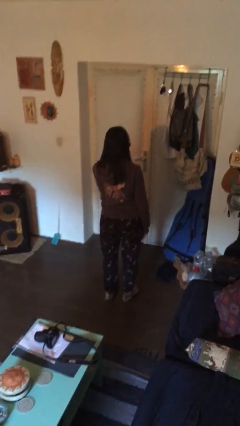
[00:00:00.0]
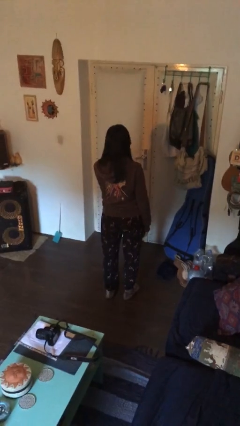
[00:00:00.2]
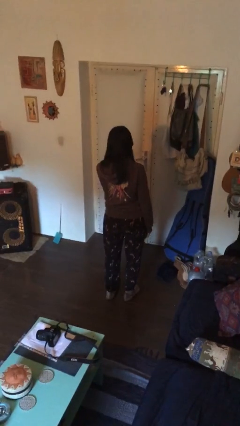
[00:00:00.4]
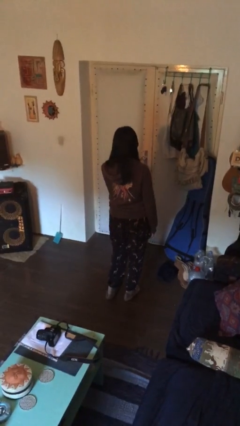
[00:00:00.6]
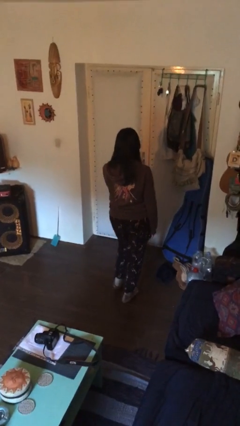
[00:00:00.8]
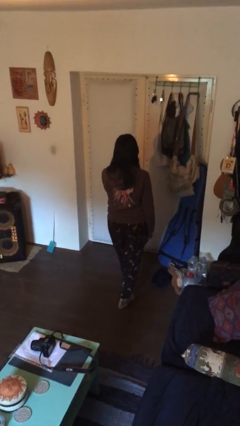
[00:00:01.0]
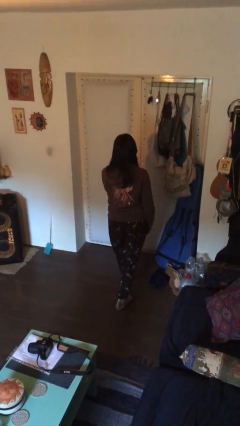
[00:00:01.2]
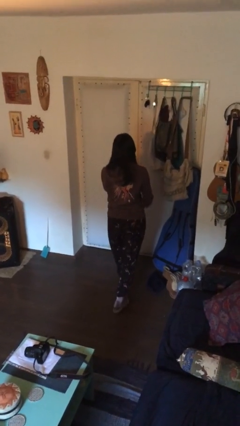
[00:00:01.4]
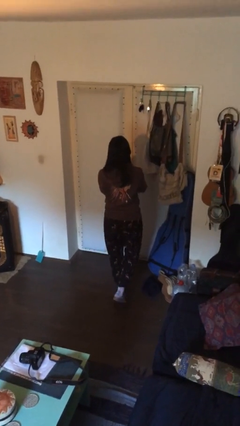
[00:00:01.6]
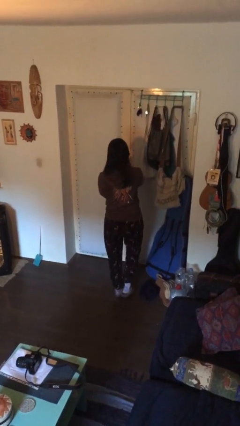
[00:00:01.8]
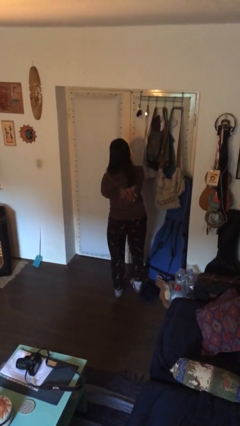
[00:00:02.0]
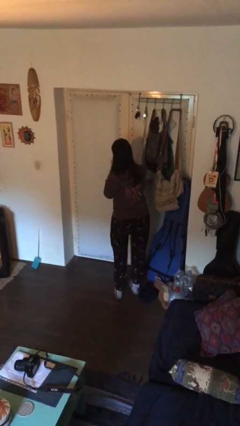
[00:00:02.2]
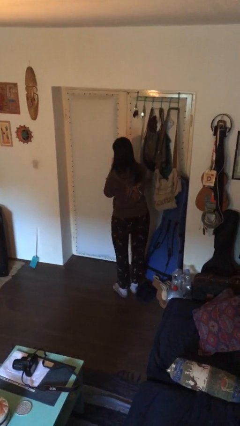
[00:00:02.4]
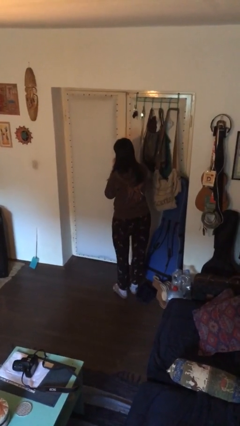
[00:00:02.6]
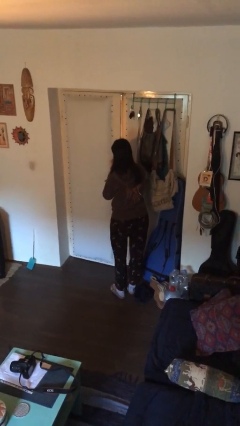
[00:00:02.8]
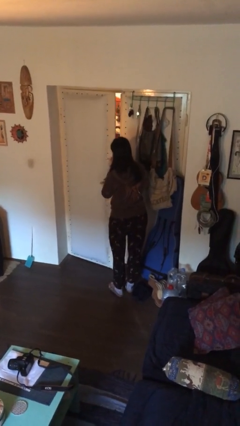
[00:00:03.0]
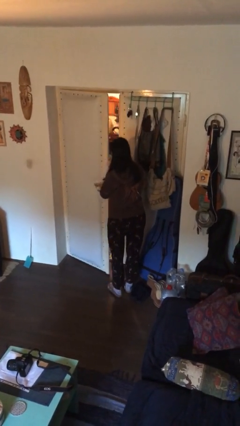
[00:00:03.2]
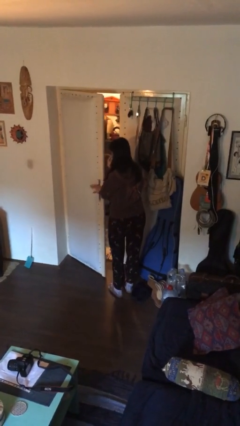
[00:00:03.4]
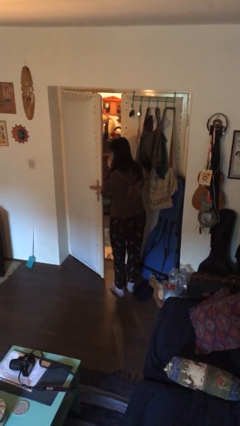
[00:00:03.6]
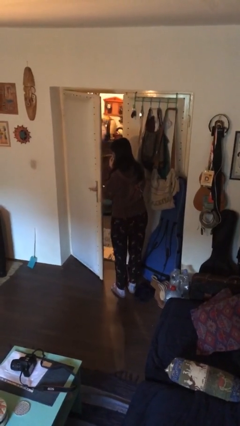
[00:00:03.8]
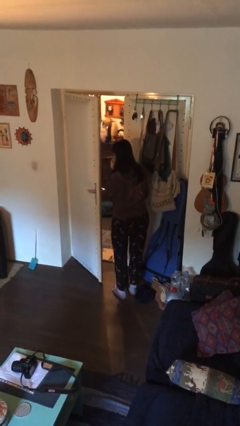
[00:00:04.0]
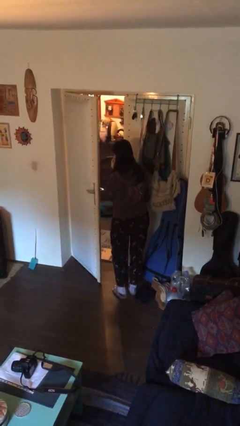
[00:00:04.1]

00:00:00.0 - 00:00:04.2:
person opens facility door

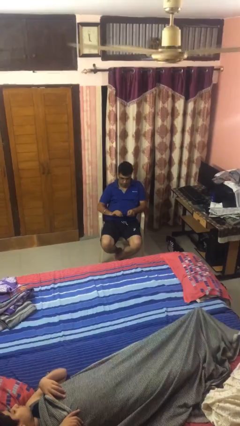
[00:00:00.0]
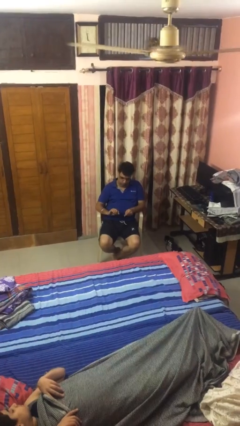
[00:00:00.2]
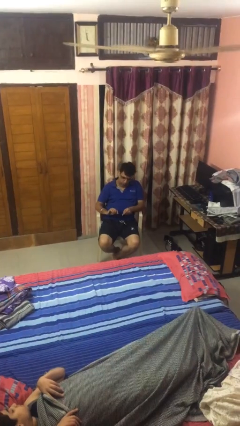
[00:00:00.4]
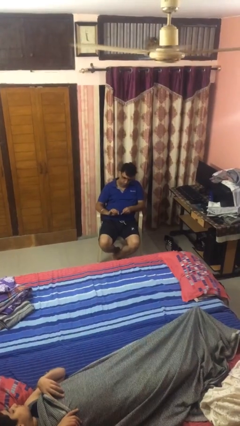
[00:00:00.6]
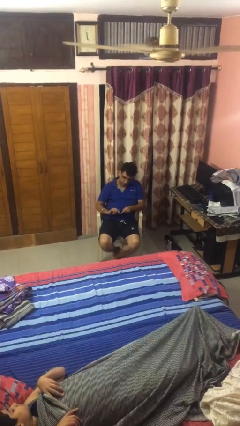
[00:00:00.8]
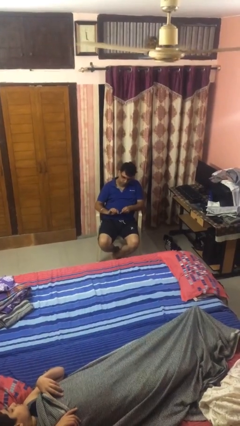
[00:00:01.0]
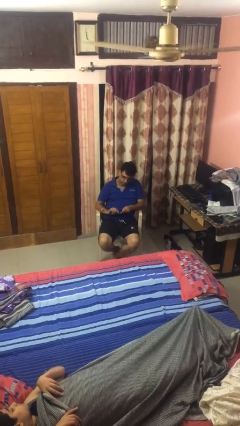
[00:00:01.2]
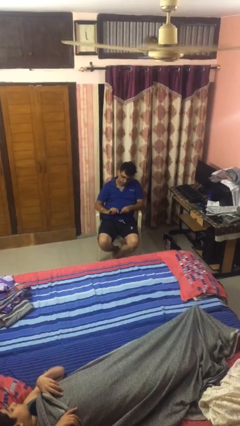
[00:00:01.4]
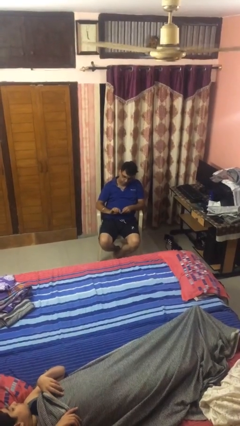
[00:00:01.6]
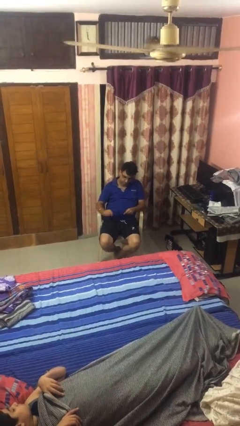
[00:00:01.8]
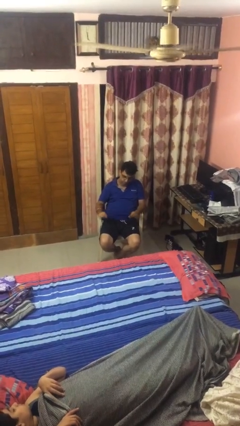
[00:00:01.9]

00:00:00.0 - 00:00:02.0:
person files fingernails

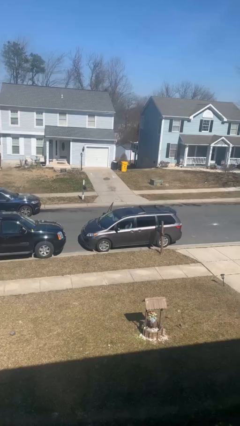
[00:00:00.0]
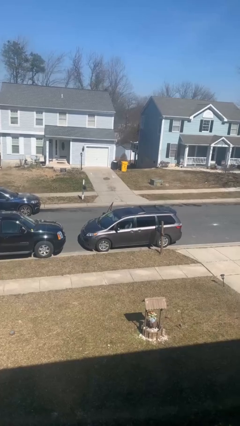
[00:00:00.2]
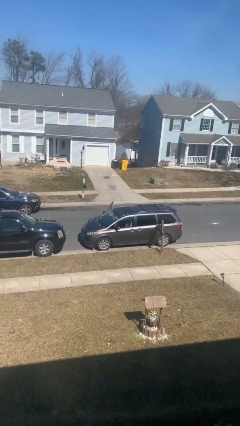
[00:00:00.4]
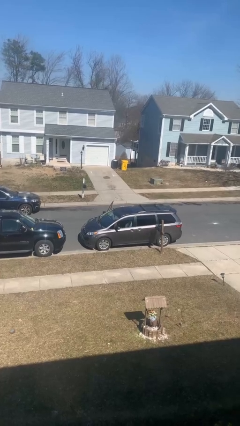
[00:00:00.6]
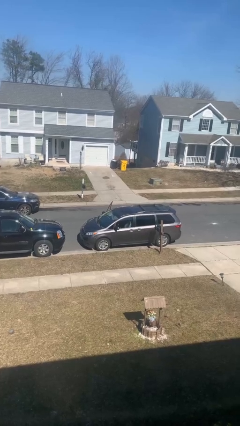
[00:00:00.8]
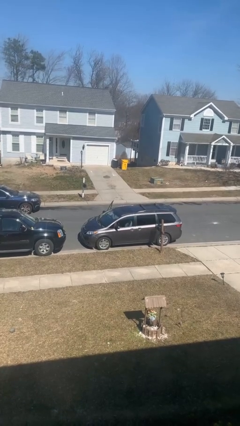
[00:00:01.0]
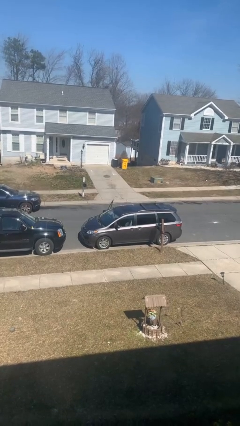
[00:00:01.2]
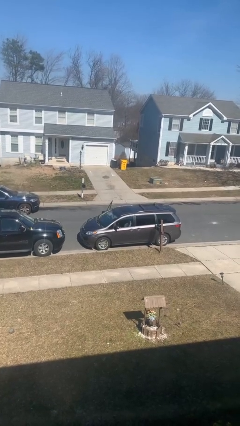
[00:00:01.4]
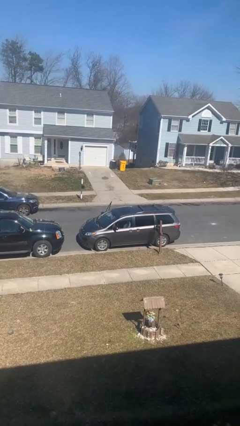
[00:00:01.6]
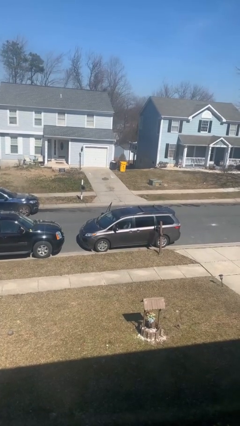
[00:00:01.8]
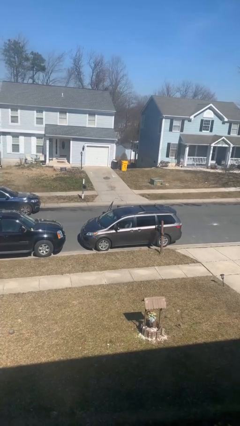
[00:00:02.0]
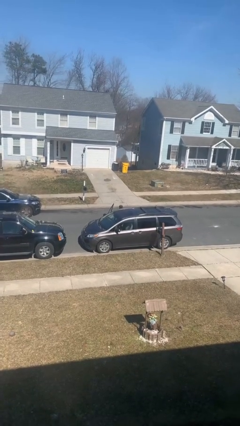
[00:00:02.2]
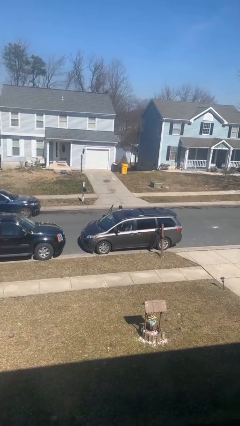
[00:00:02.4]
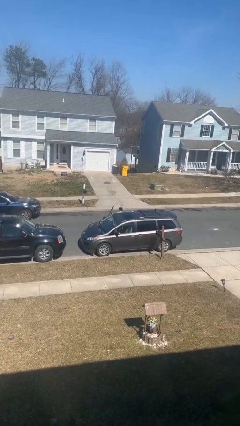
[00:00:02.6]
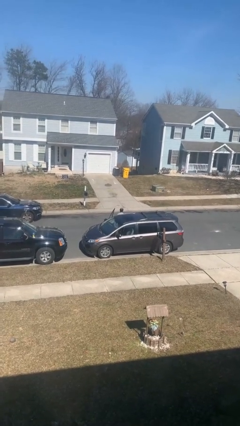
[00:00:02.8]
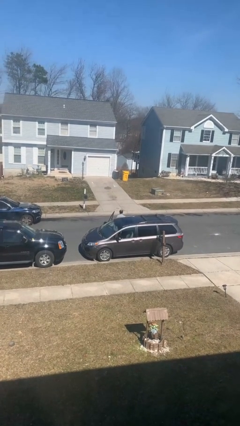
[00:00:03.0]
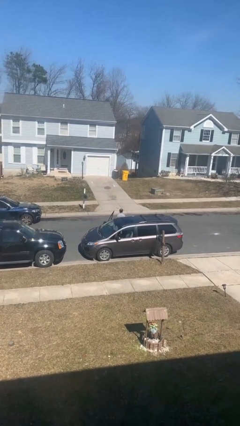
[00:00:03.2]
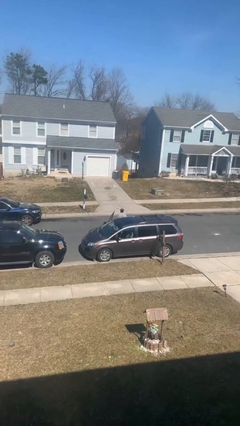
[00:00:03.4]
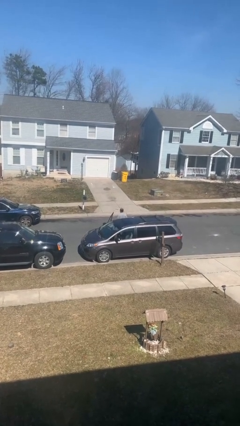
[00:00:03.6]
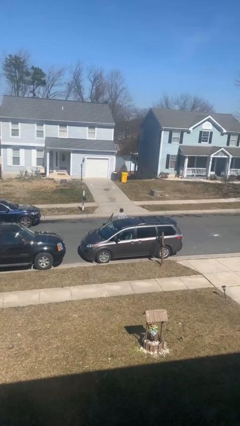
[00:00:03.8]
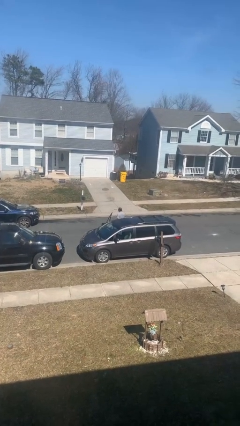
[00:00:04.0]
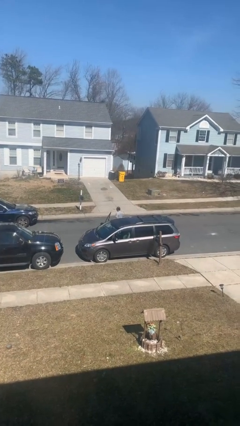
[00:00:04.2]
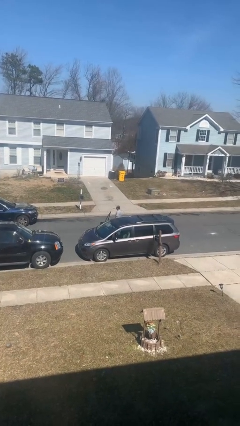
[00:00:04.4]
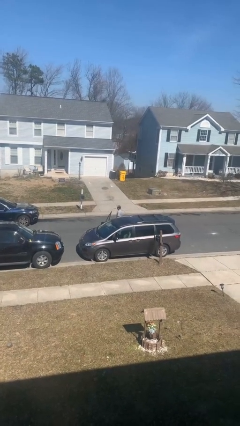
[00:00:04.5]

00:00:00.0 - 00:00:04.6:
person exits car

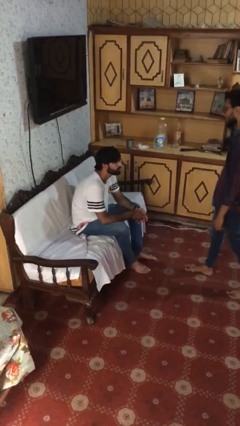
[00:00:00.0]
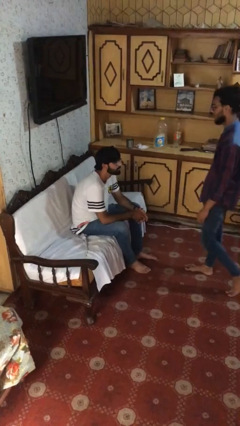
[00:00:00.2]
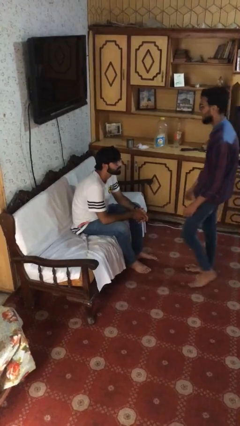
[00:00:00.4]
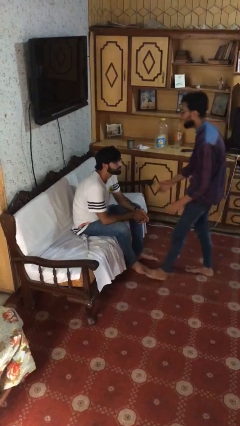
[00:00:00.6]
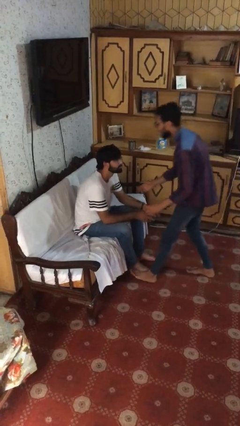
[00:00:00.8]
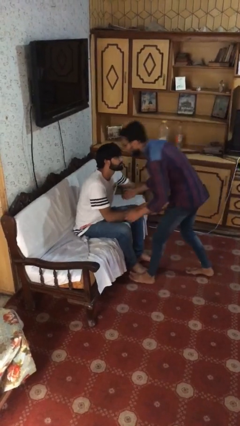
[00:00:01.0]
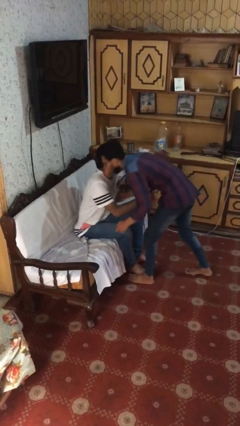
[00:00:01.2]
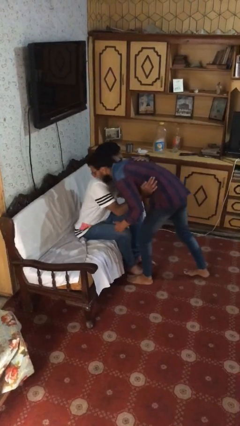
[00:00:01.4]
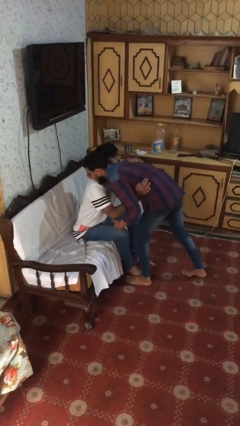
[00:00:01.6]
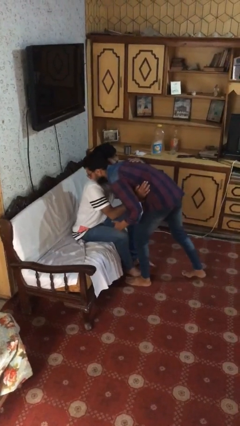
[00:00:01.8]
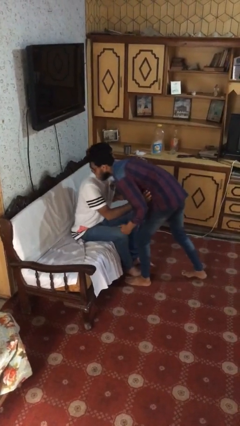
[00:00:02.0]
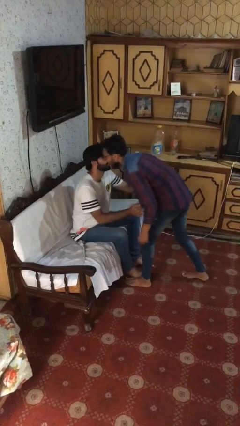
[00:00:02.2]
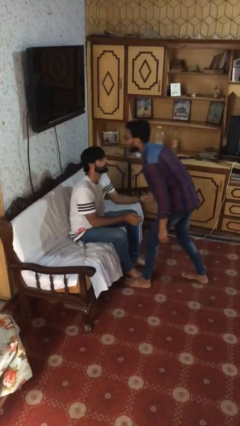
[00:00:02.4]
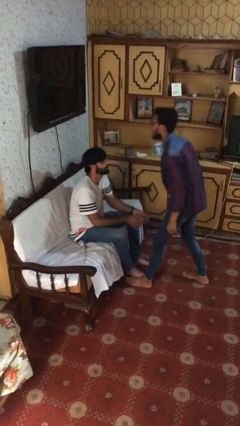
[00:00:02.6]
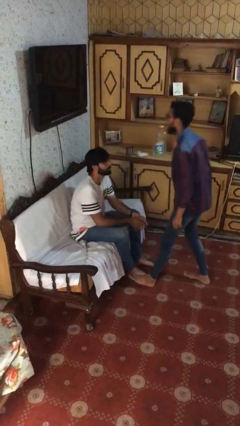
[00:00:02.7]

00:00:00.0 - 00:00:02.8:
person embraces person

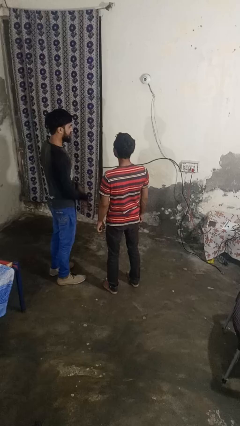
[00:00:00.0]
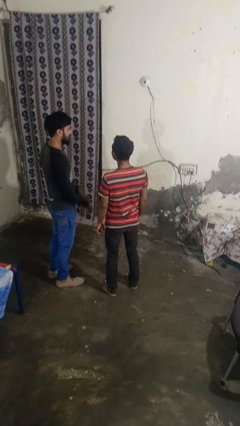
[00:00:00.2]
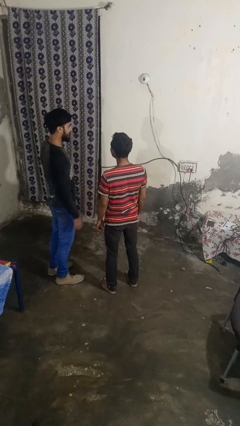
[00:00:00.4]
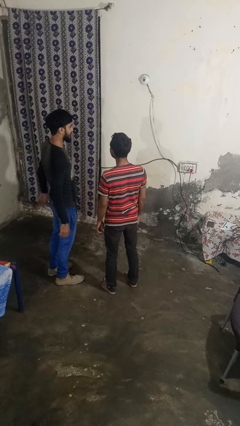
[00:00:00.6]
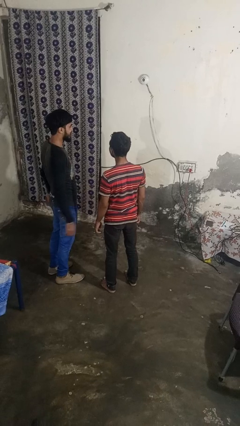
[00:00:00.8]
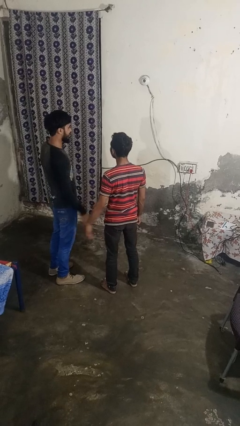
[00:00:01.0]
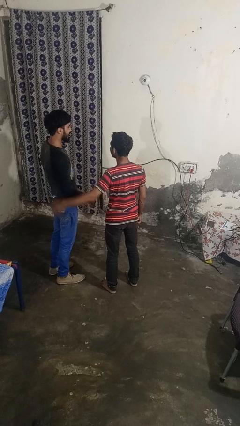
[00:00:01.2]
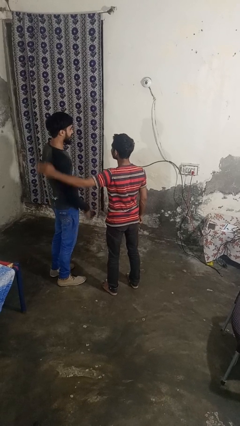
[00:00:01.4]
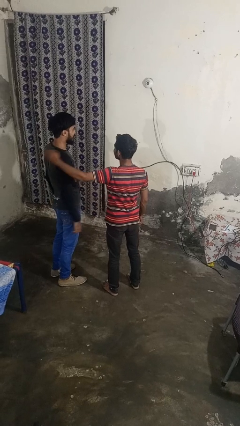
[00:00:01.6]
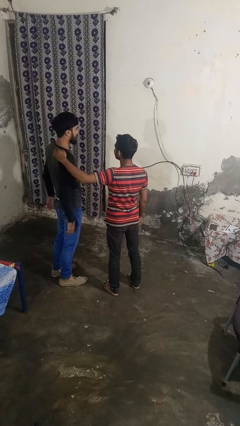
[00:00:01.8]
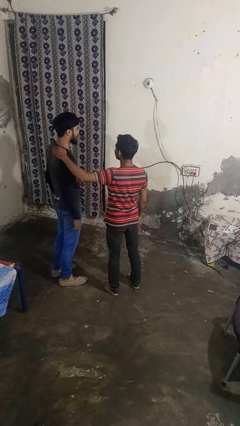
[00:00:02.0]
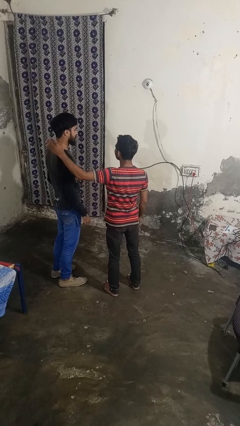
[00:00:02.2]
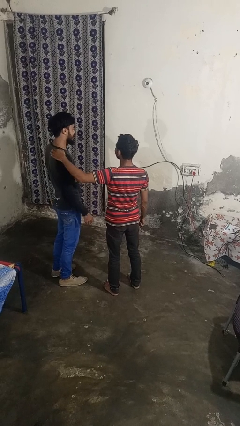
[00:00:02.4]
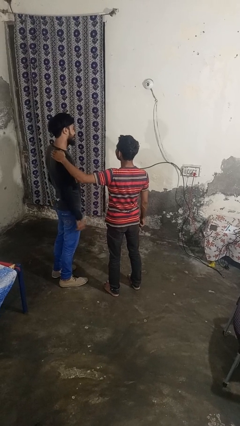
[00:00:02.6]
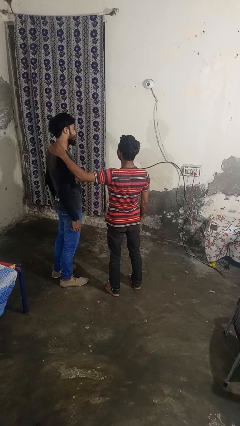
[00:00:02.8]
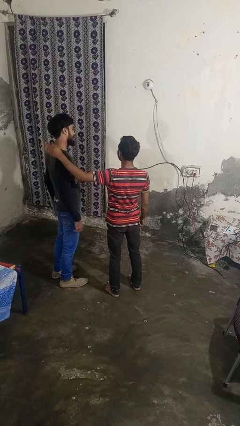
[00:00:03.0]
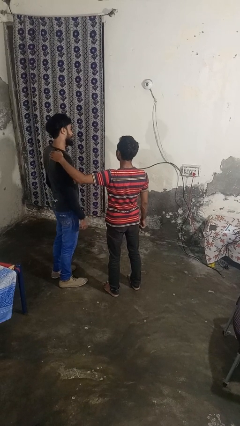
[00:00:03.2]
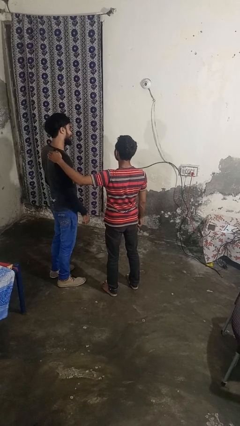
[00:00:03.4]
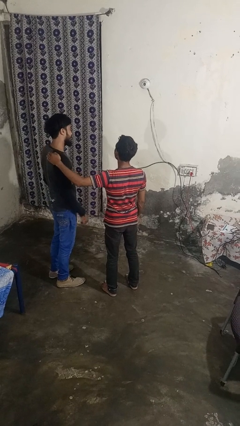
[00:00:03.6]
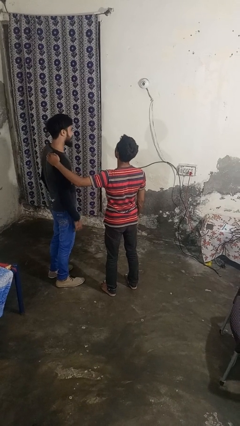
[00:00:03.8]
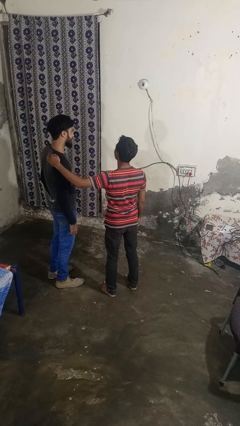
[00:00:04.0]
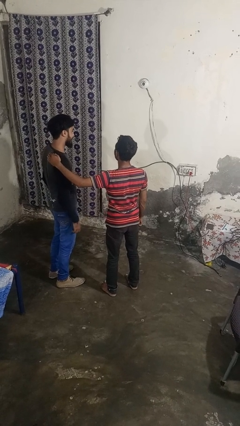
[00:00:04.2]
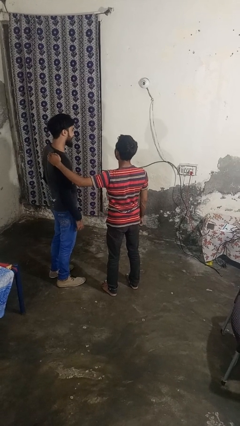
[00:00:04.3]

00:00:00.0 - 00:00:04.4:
person pounds shoulders of person
